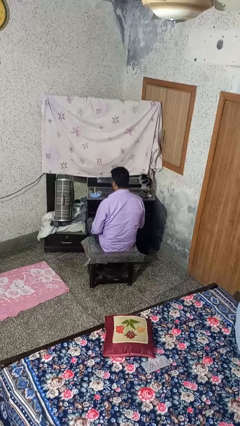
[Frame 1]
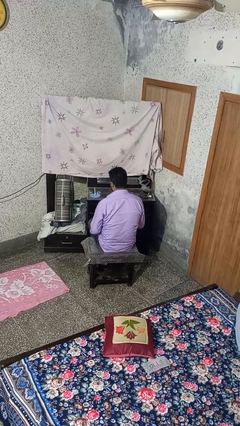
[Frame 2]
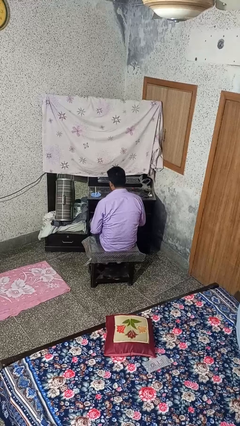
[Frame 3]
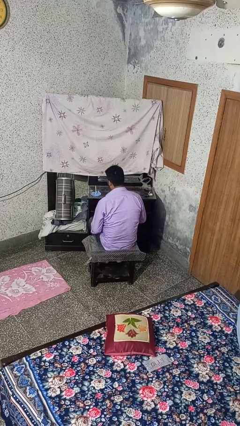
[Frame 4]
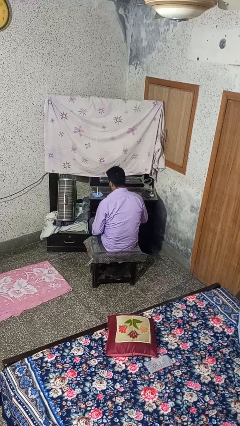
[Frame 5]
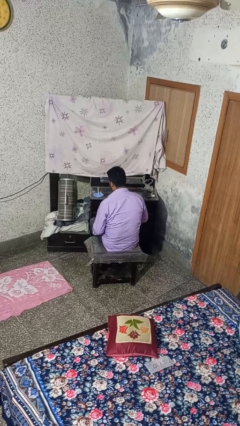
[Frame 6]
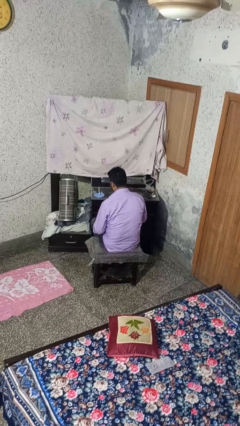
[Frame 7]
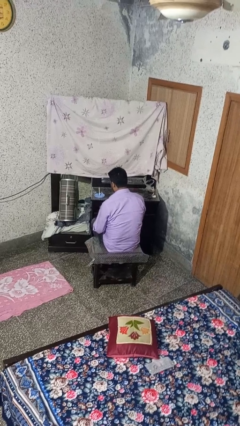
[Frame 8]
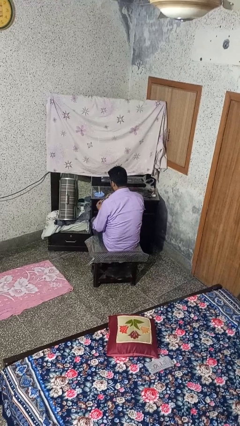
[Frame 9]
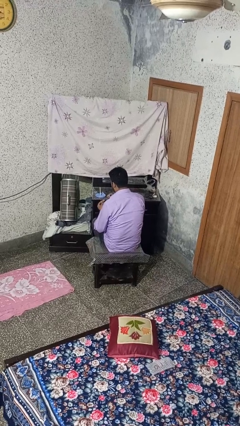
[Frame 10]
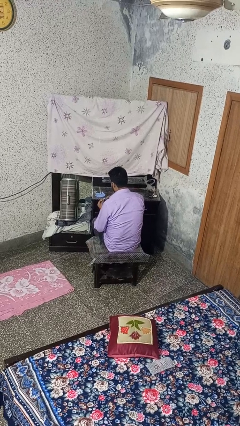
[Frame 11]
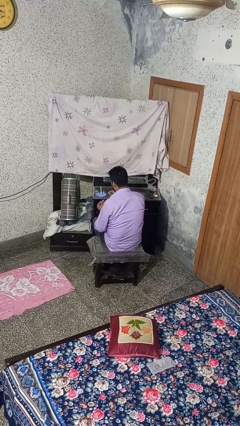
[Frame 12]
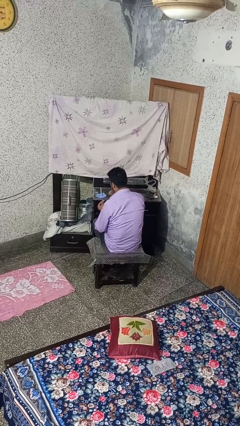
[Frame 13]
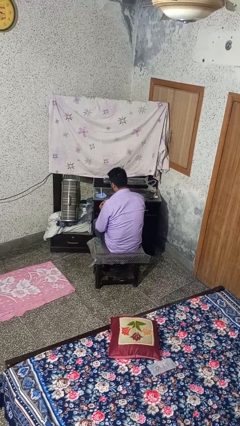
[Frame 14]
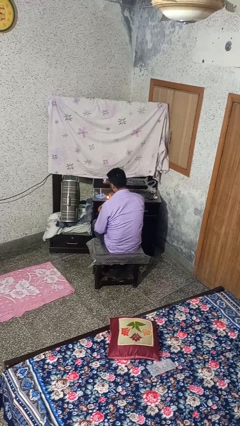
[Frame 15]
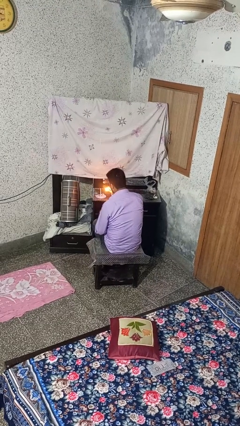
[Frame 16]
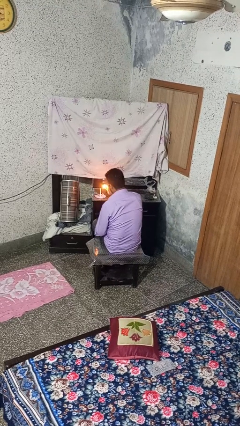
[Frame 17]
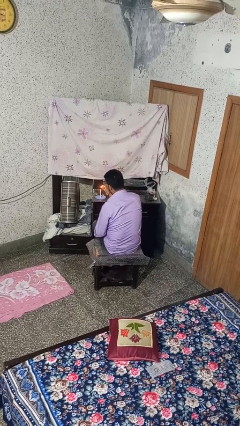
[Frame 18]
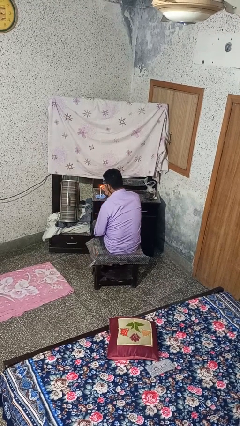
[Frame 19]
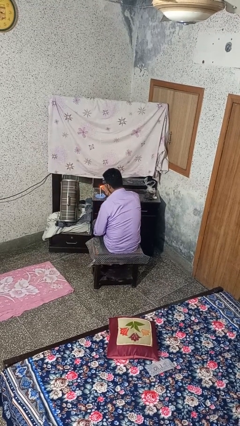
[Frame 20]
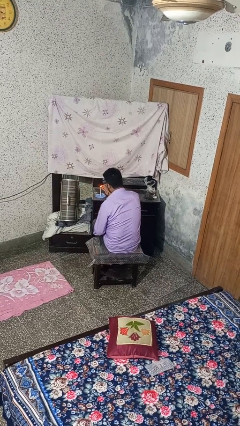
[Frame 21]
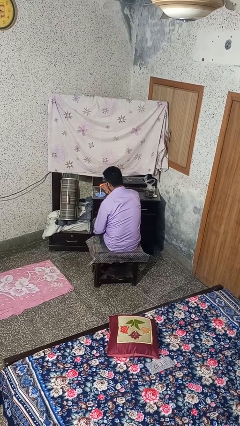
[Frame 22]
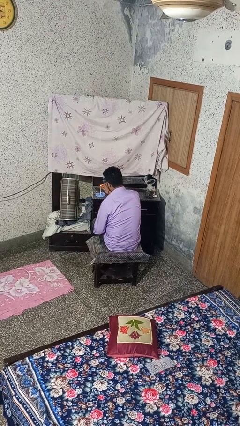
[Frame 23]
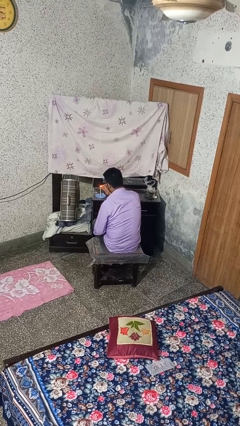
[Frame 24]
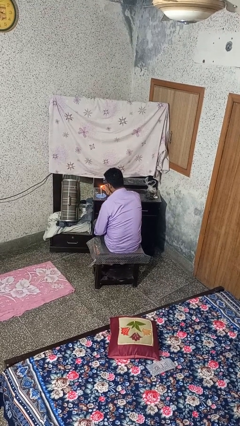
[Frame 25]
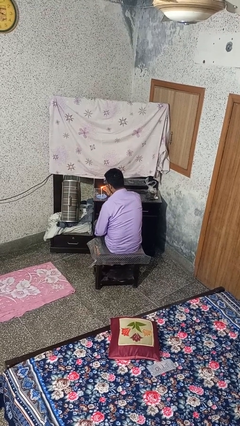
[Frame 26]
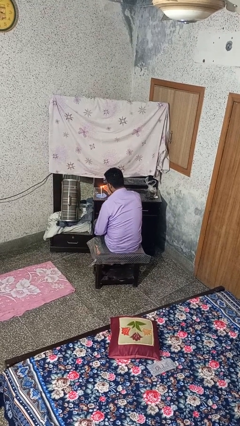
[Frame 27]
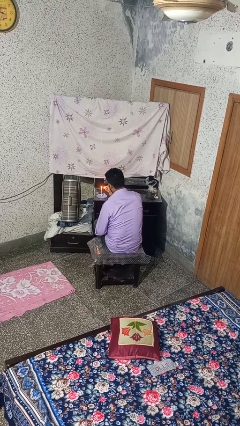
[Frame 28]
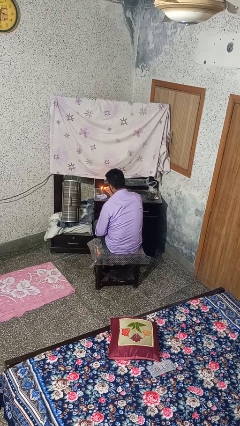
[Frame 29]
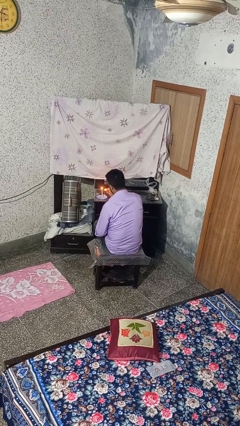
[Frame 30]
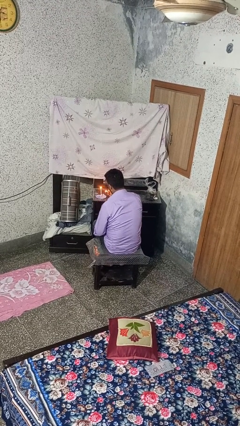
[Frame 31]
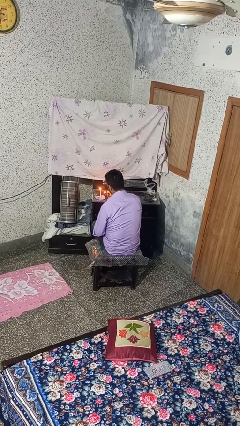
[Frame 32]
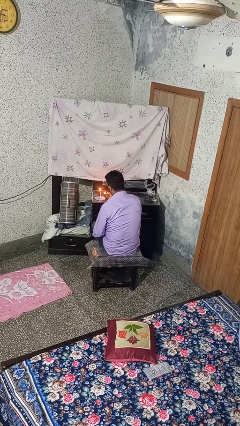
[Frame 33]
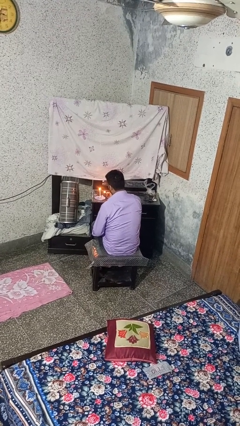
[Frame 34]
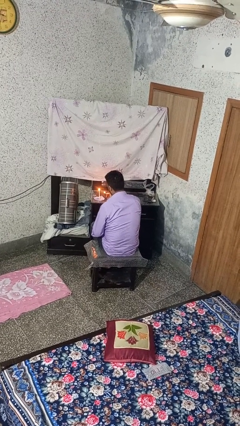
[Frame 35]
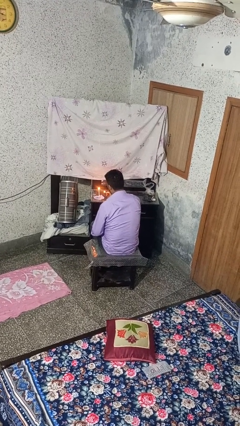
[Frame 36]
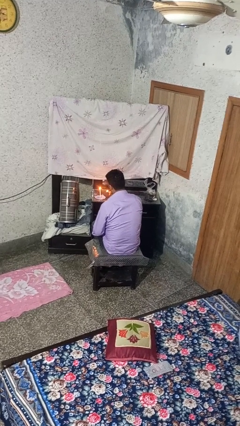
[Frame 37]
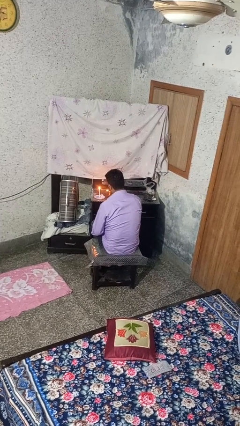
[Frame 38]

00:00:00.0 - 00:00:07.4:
person lights candle

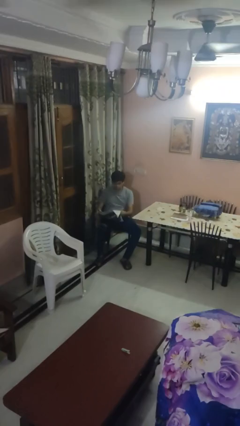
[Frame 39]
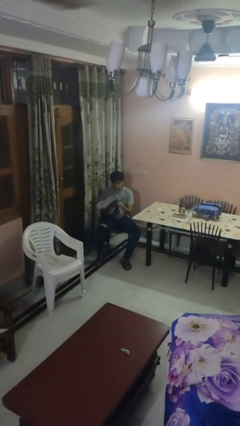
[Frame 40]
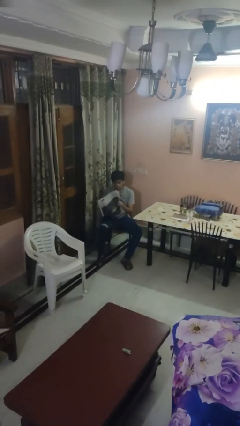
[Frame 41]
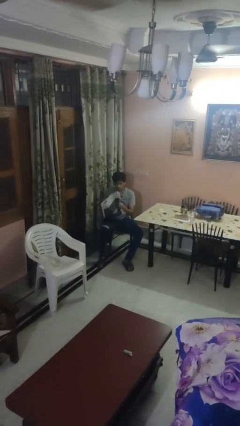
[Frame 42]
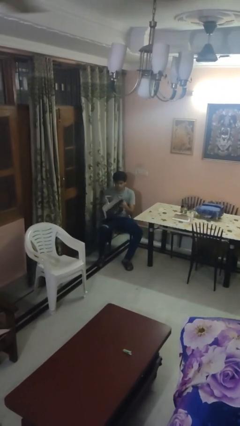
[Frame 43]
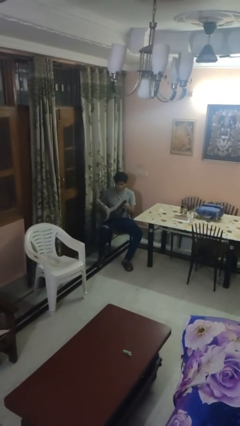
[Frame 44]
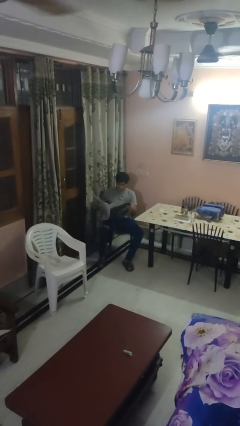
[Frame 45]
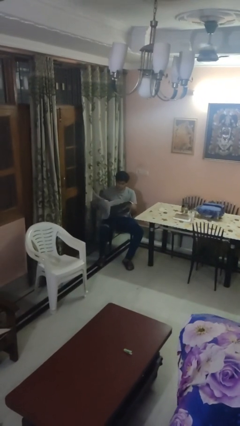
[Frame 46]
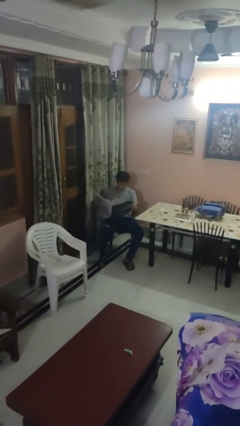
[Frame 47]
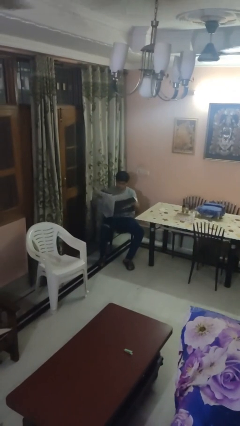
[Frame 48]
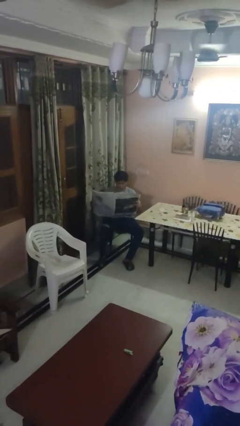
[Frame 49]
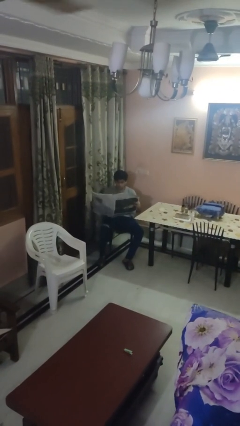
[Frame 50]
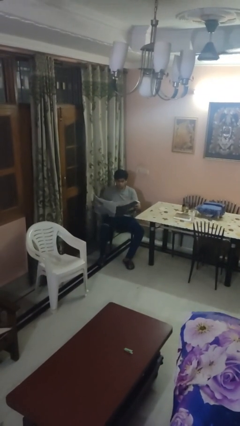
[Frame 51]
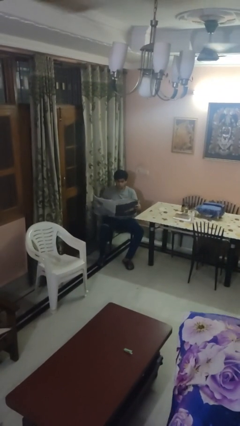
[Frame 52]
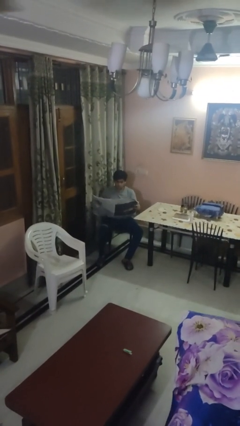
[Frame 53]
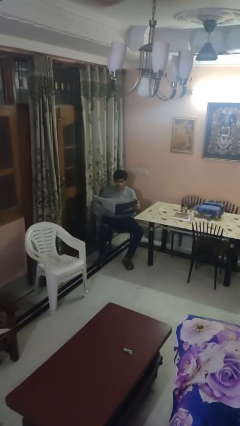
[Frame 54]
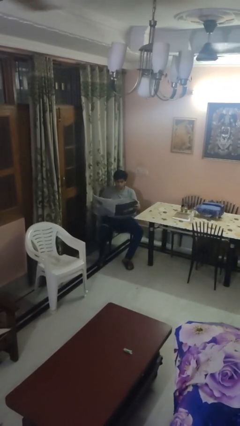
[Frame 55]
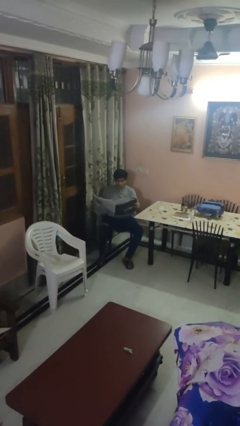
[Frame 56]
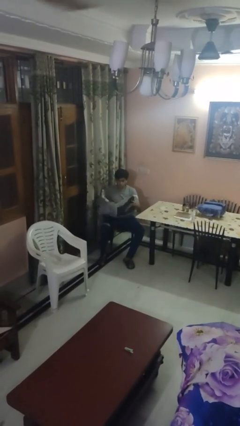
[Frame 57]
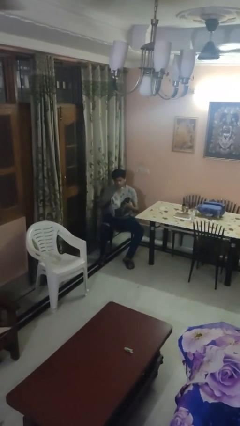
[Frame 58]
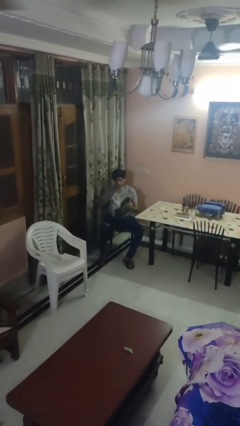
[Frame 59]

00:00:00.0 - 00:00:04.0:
person reads newspaper

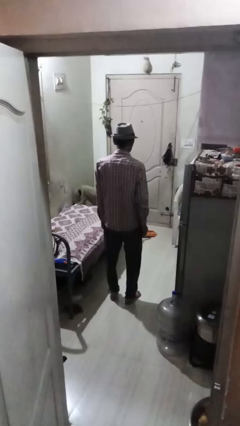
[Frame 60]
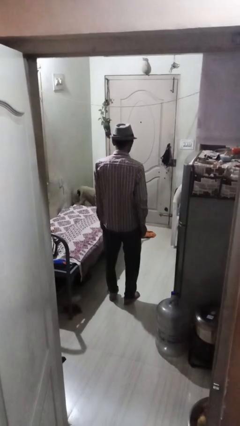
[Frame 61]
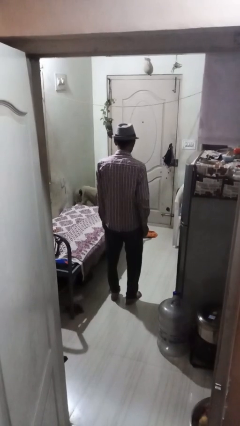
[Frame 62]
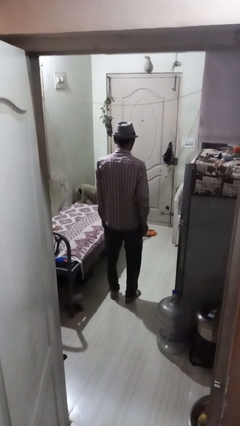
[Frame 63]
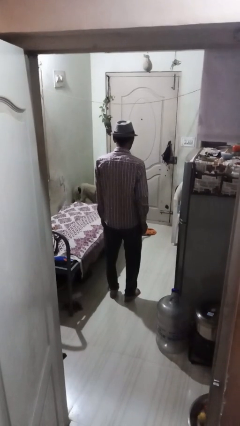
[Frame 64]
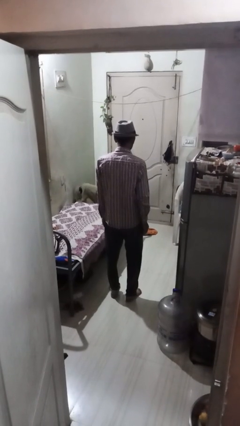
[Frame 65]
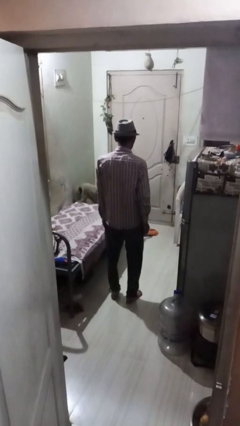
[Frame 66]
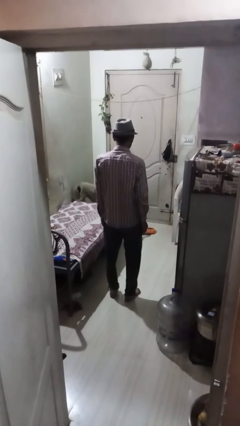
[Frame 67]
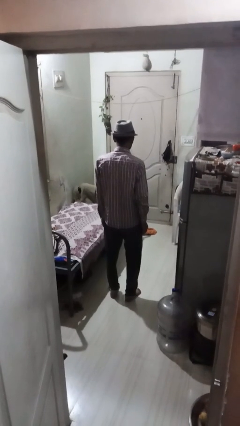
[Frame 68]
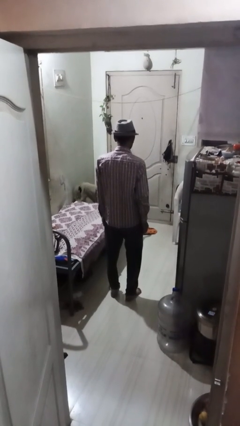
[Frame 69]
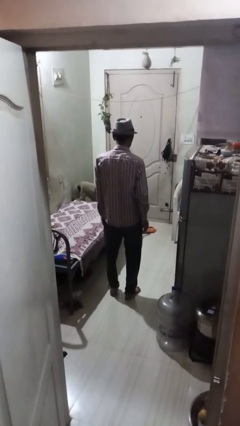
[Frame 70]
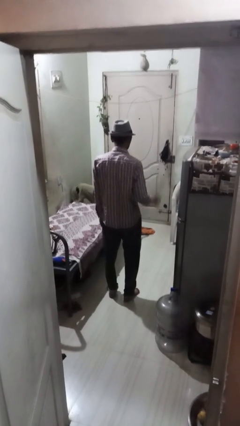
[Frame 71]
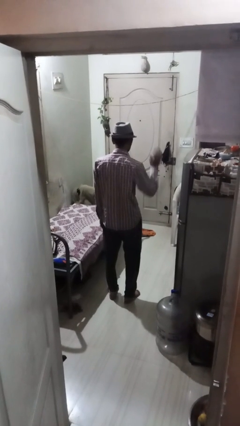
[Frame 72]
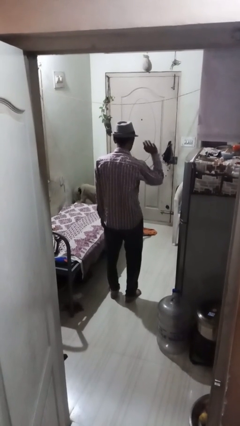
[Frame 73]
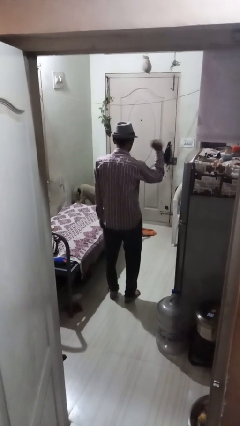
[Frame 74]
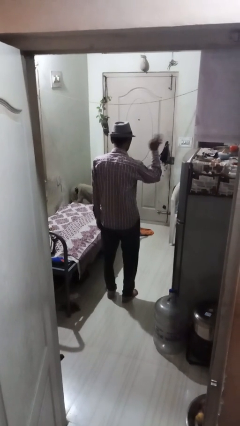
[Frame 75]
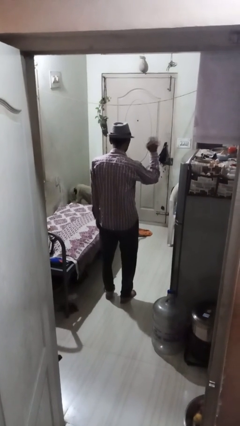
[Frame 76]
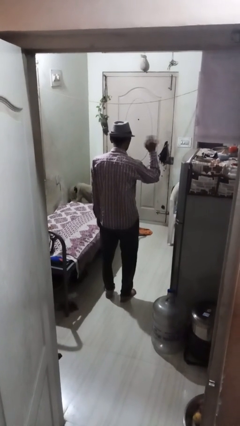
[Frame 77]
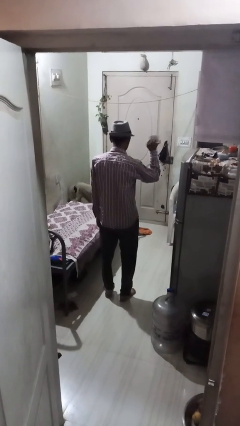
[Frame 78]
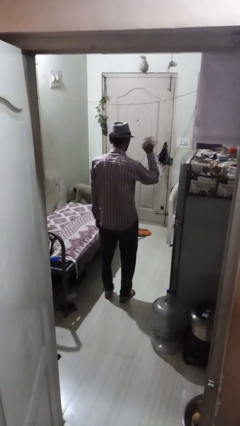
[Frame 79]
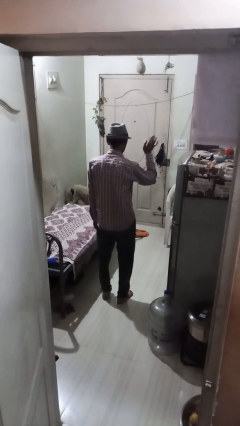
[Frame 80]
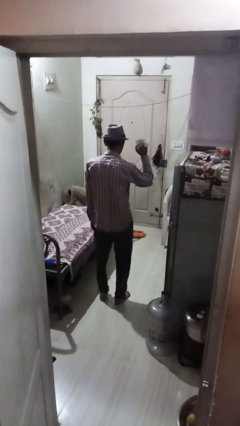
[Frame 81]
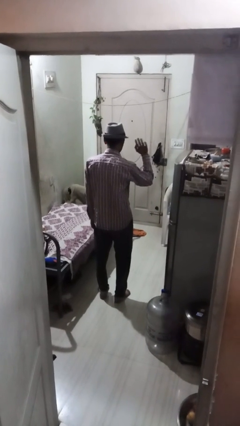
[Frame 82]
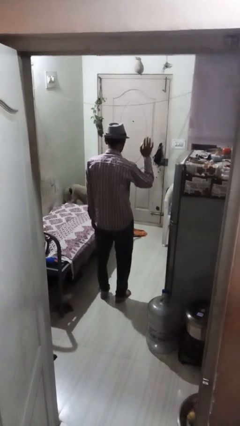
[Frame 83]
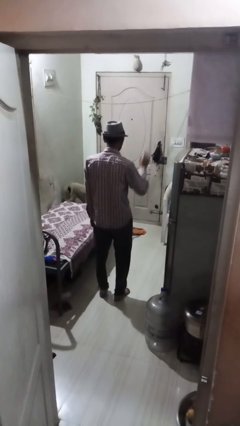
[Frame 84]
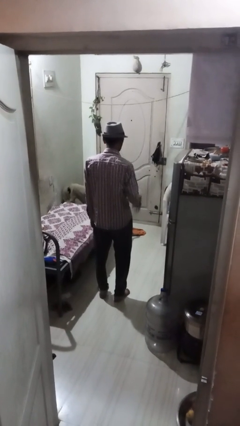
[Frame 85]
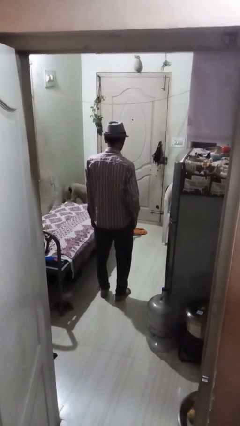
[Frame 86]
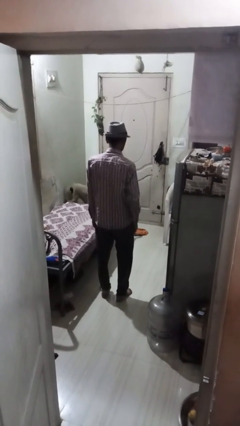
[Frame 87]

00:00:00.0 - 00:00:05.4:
person waves at person

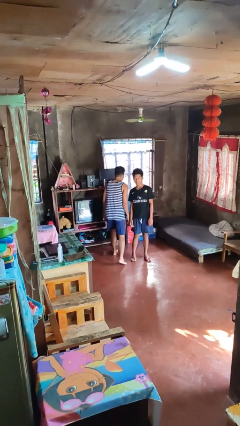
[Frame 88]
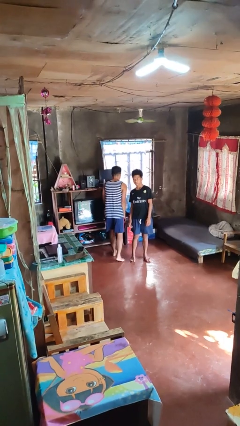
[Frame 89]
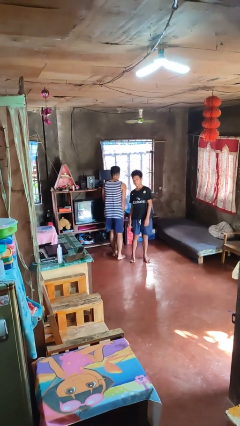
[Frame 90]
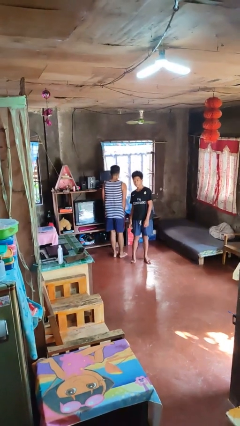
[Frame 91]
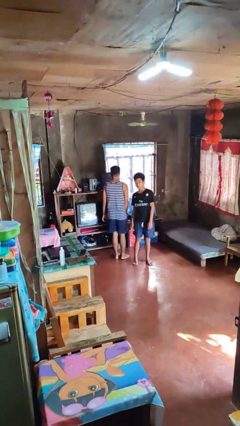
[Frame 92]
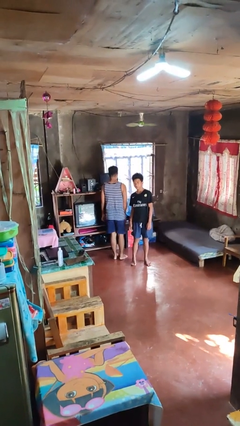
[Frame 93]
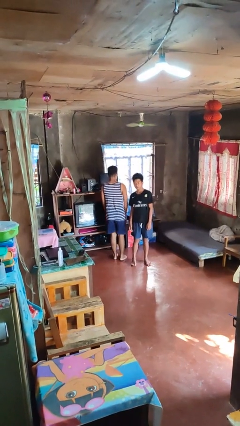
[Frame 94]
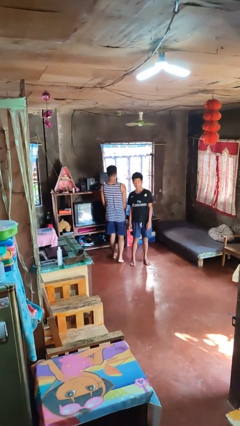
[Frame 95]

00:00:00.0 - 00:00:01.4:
person bumps into person
